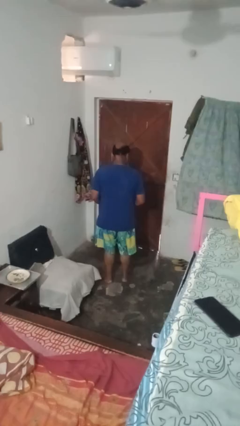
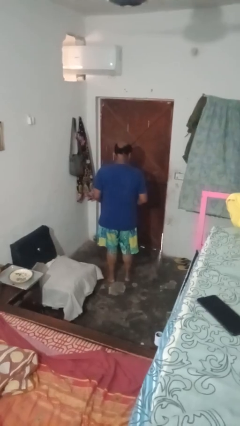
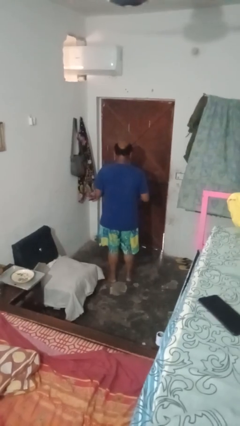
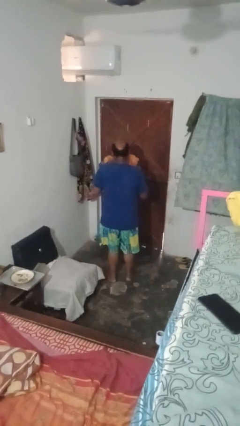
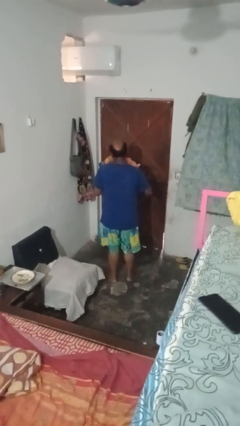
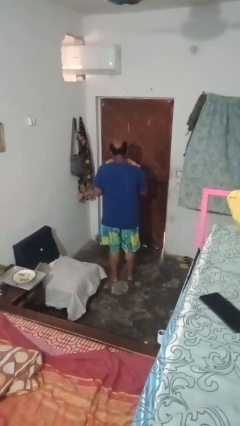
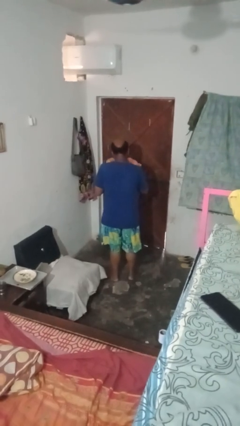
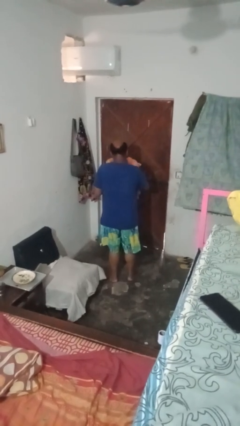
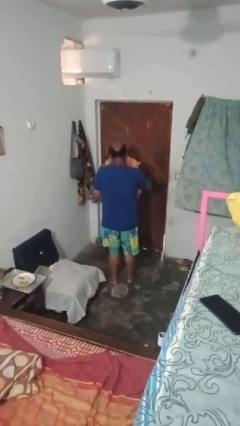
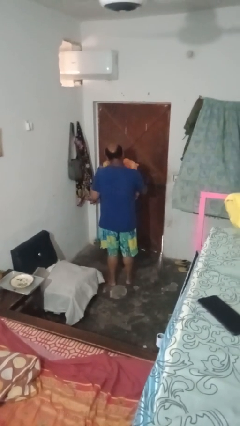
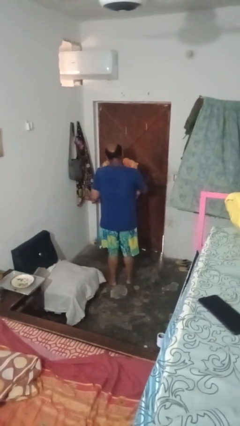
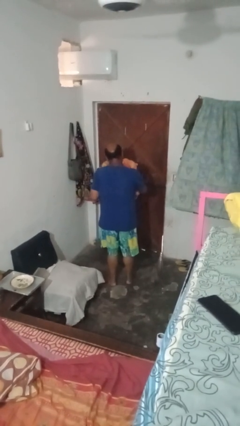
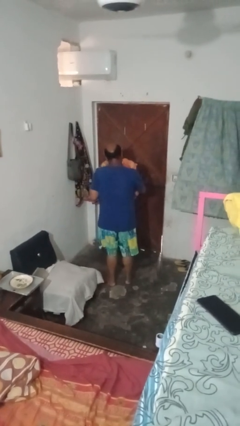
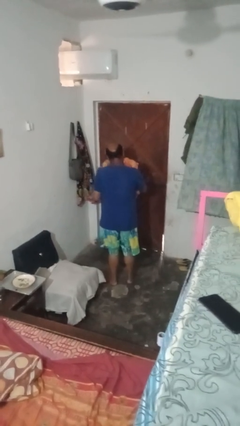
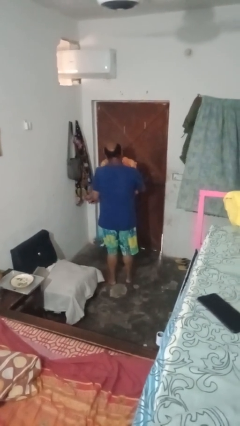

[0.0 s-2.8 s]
person hugs stuffed animal

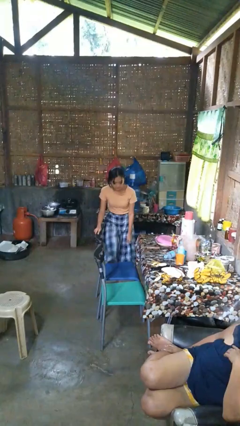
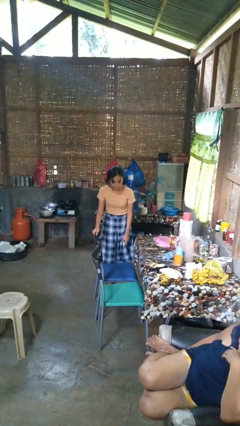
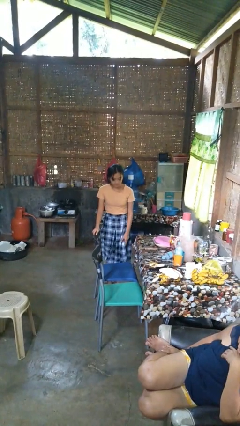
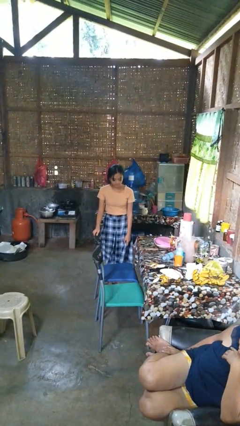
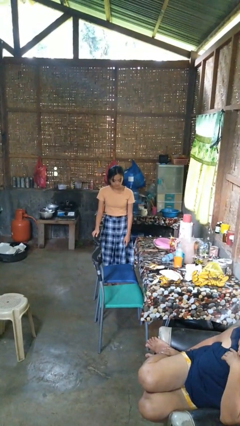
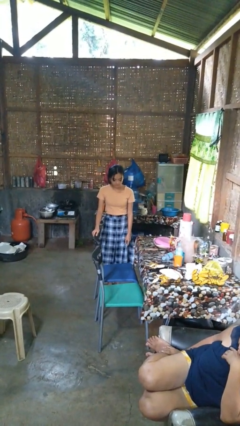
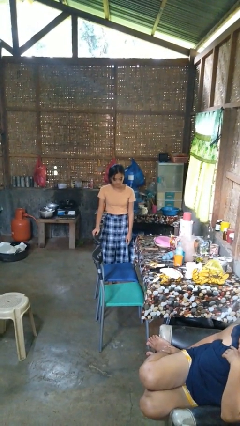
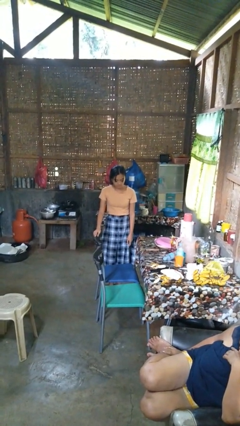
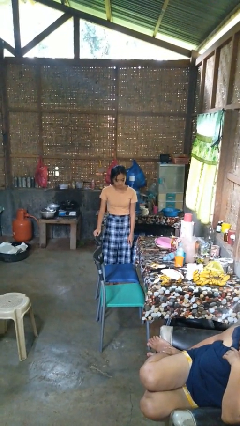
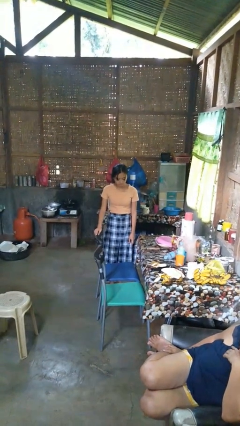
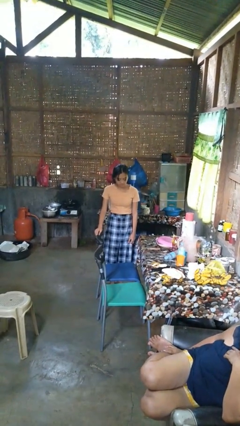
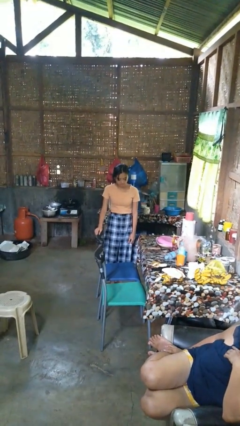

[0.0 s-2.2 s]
person climbs off couch

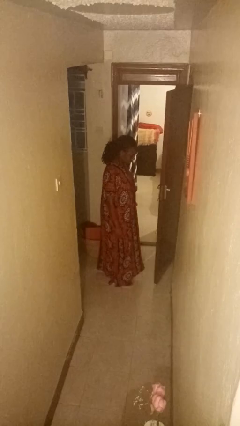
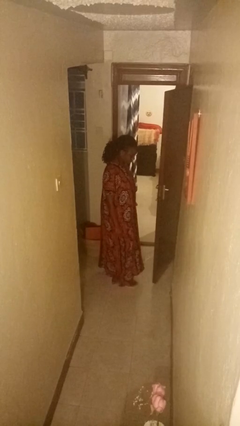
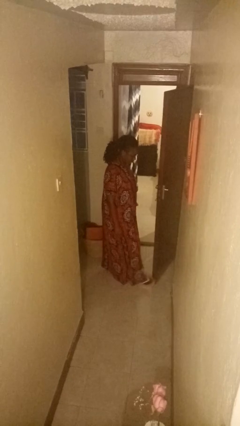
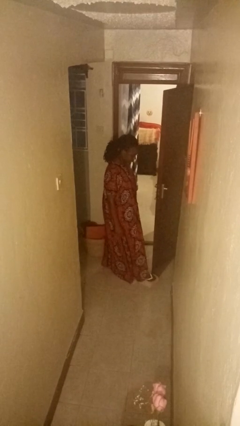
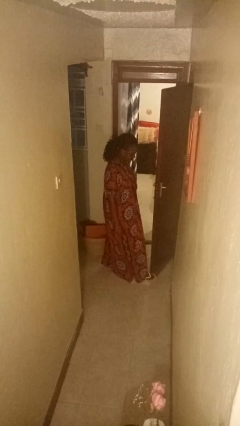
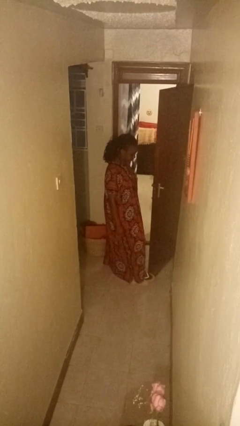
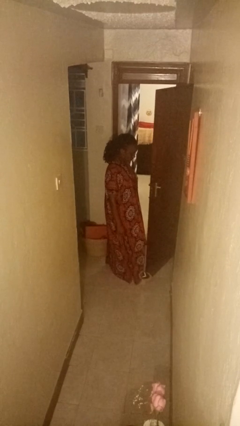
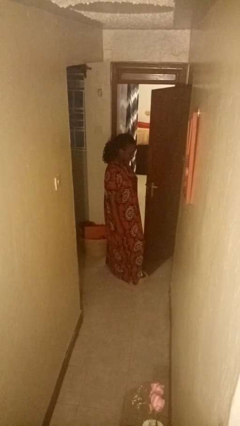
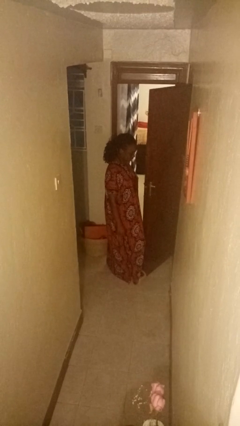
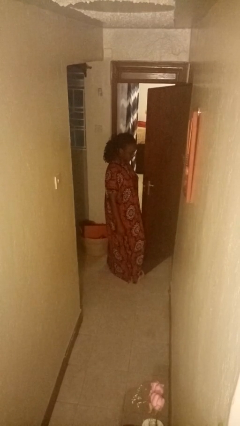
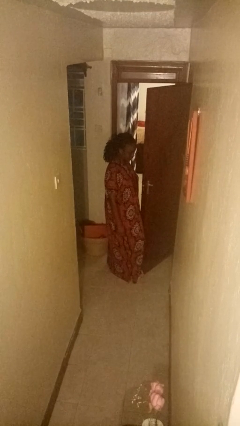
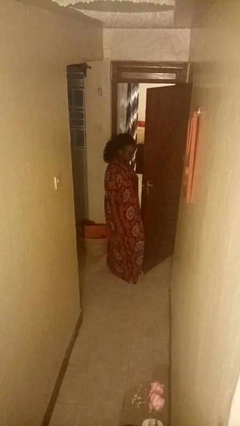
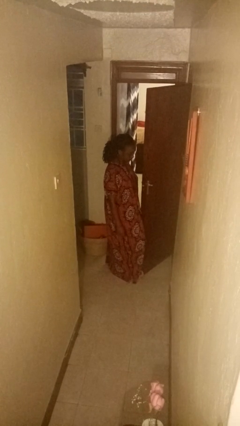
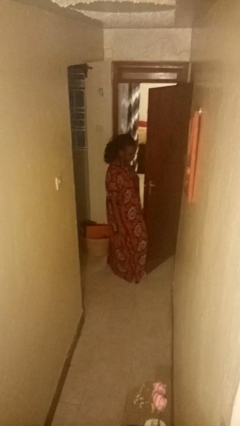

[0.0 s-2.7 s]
person opens facility door

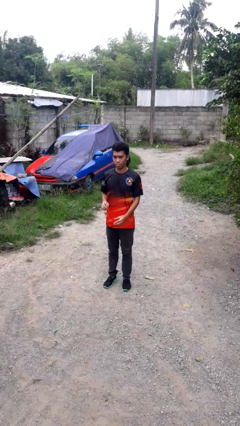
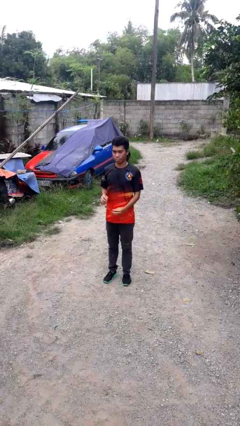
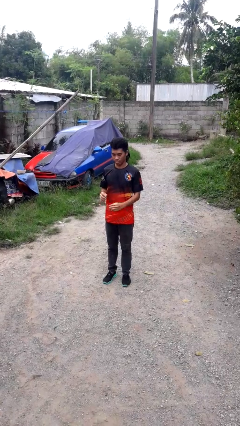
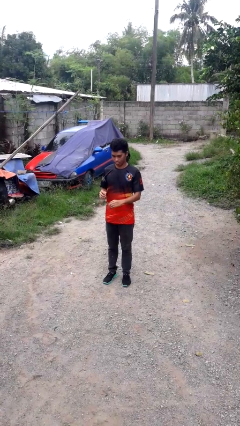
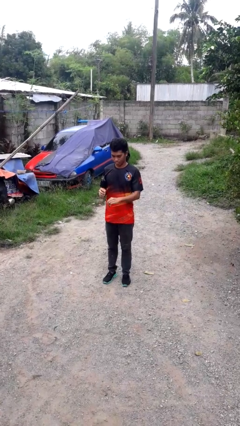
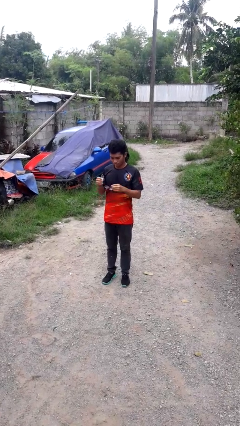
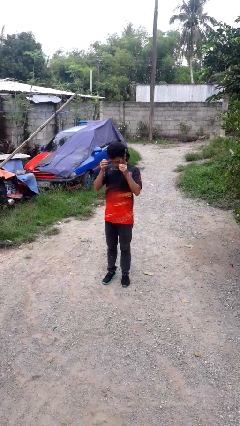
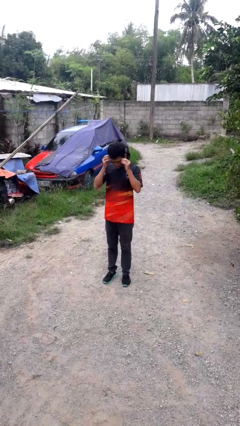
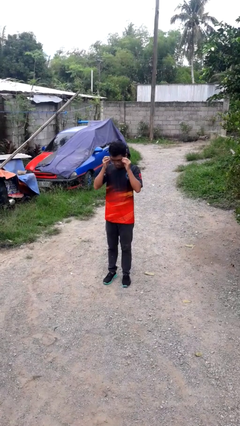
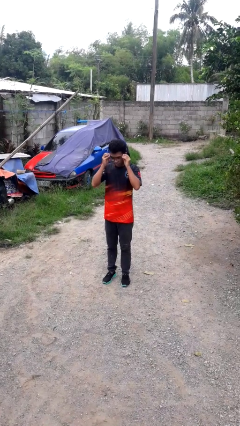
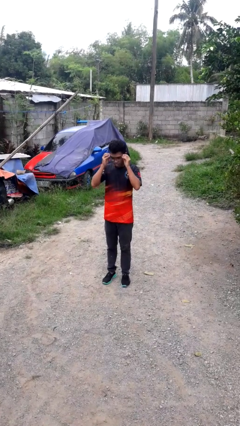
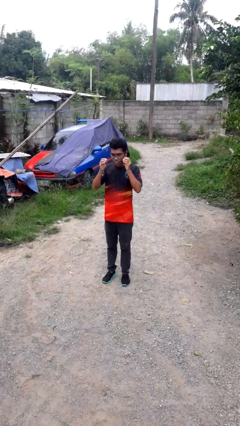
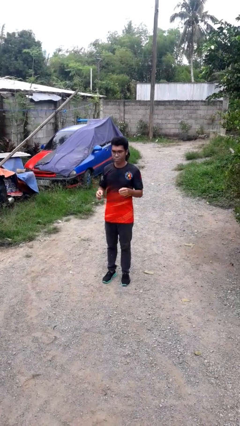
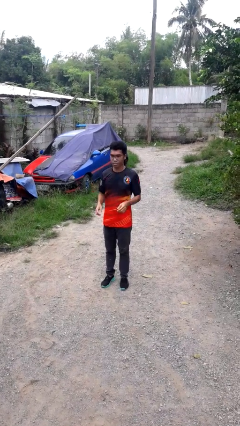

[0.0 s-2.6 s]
person puts on glasses

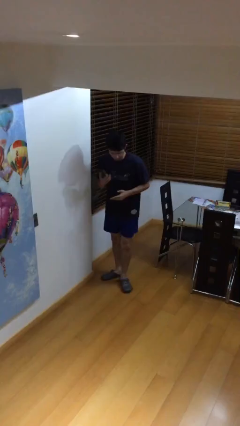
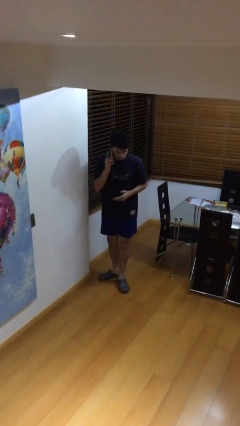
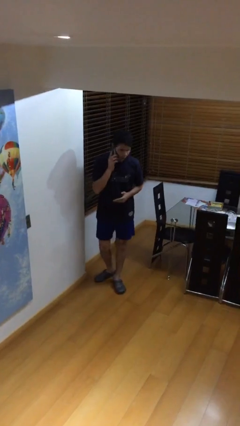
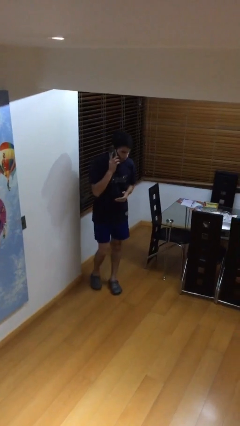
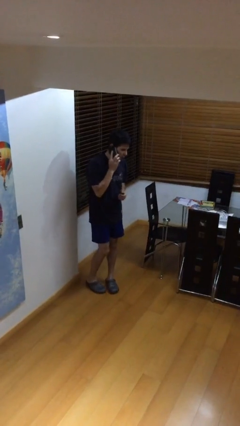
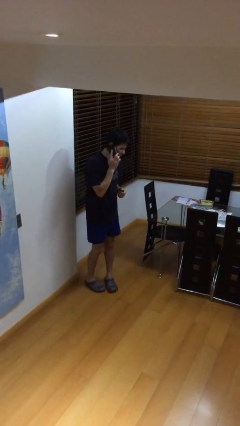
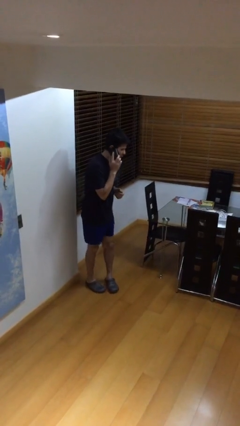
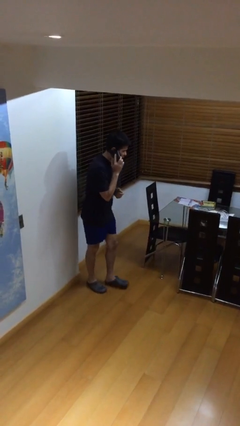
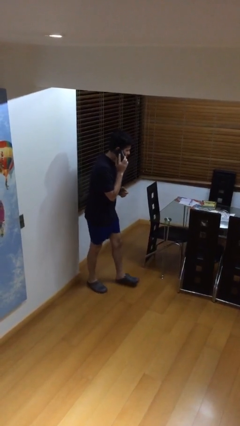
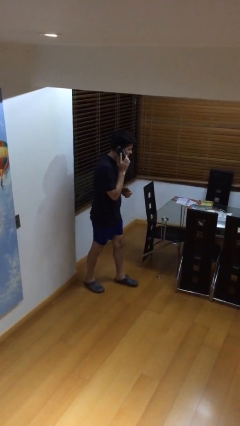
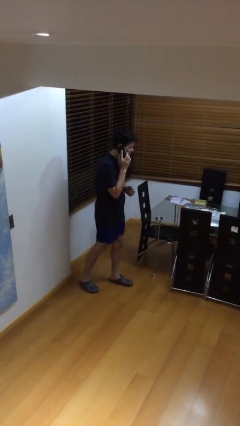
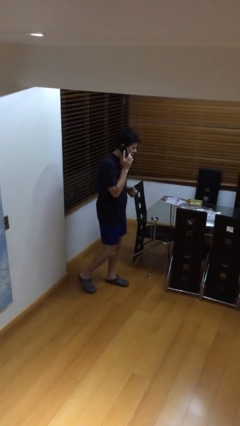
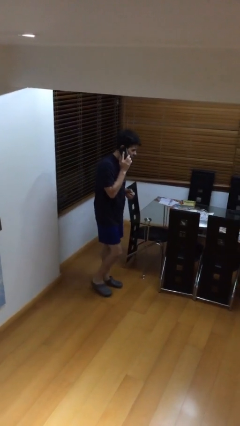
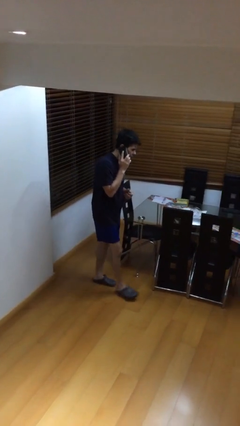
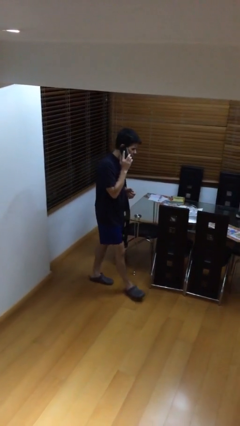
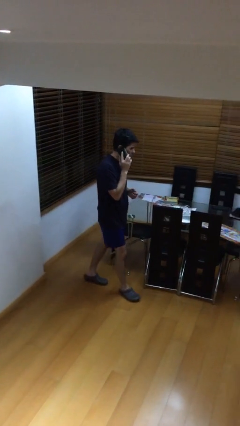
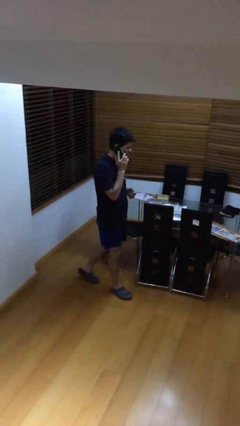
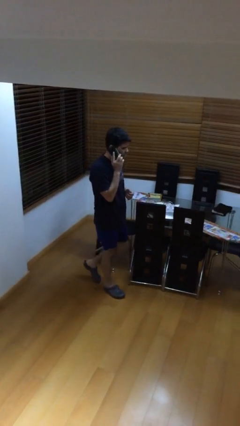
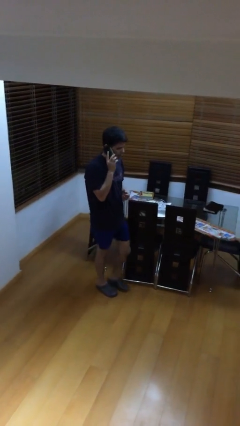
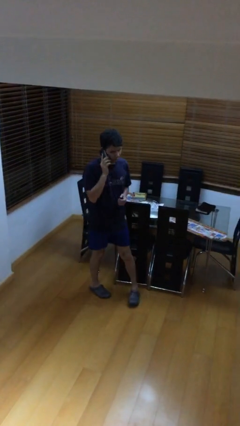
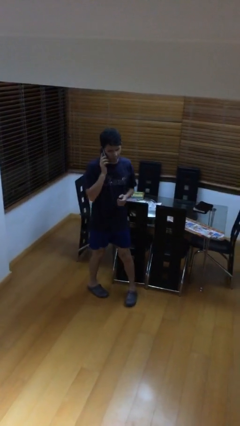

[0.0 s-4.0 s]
person talks on phone

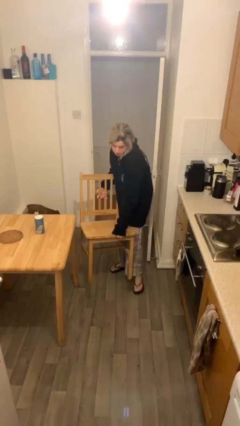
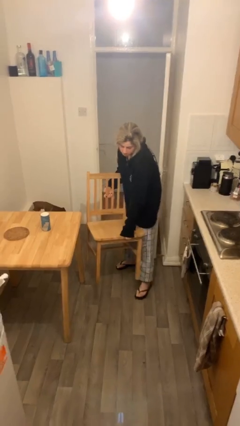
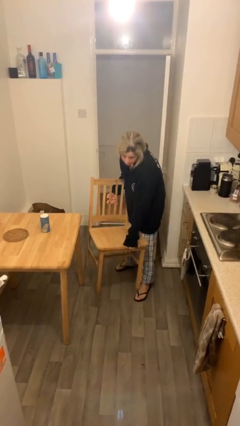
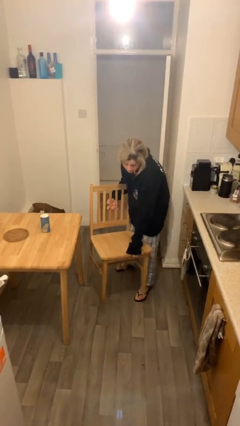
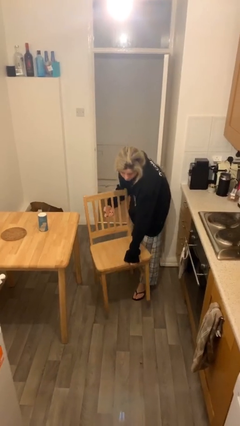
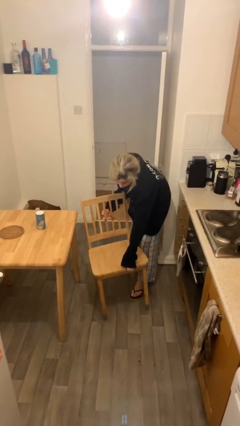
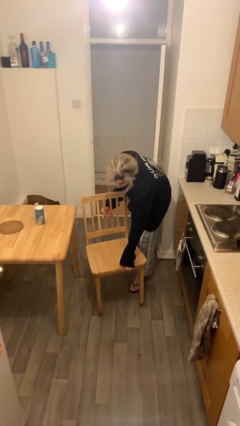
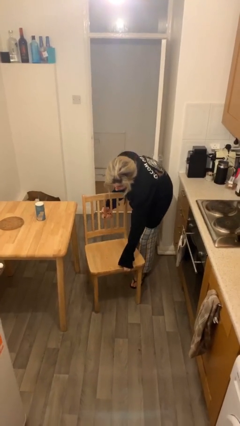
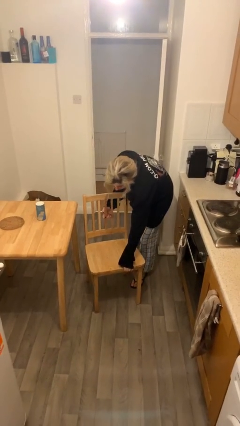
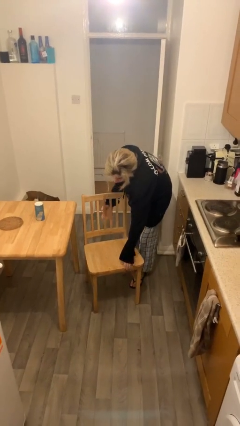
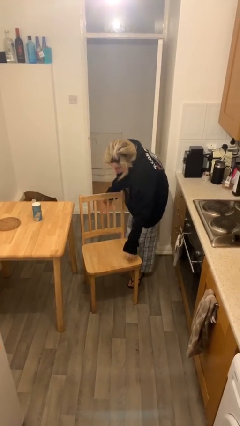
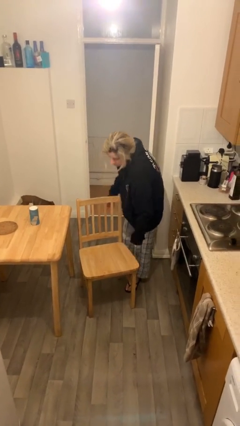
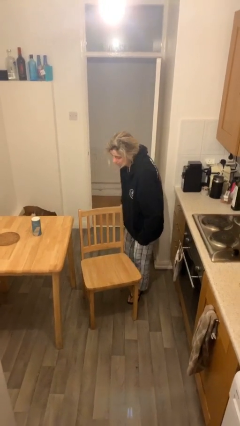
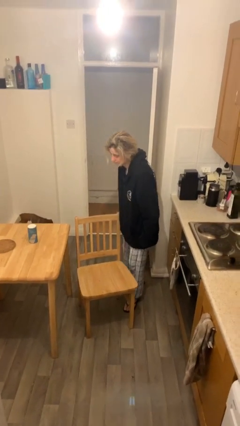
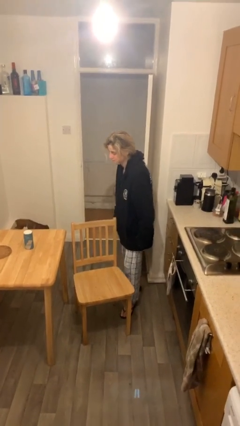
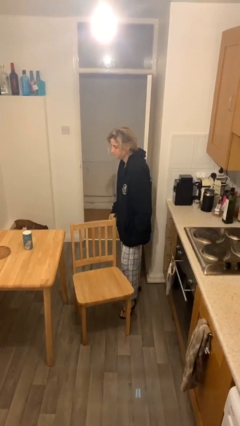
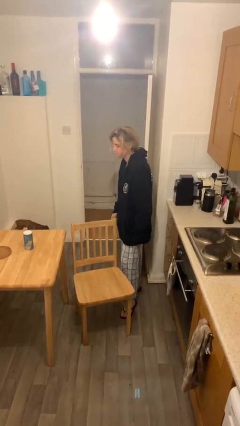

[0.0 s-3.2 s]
person puts down object on floor

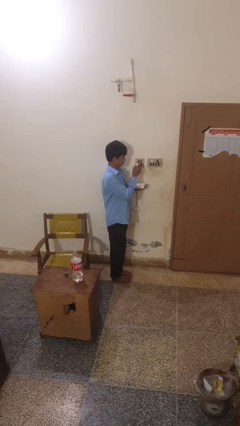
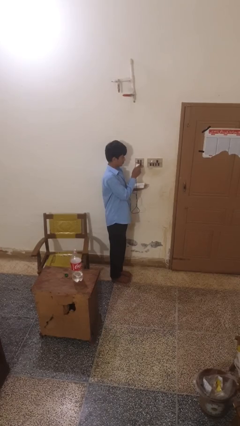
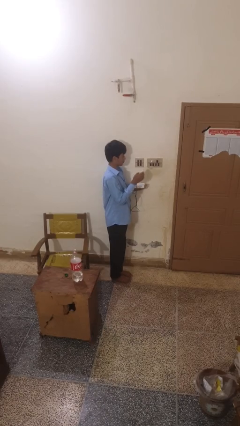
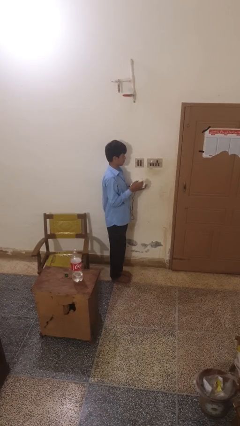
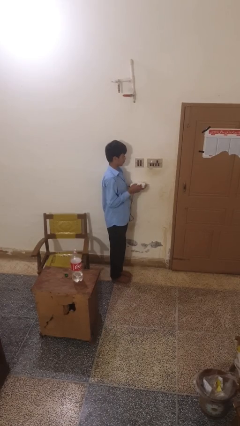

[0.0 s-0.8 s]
person unplugs from electrical socket
